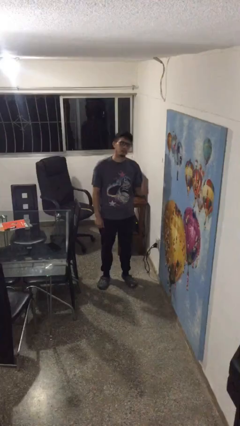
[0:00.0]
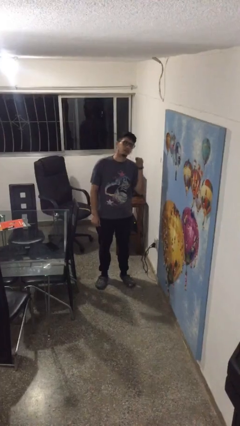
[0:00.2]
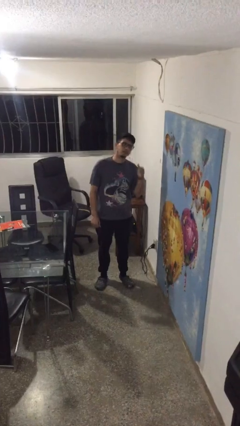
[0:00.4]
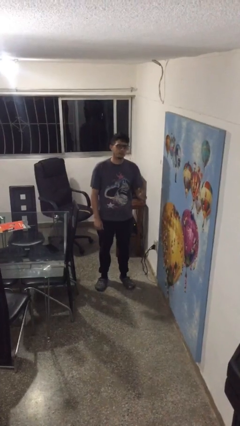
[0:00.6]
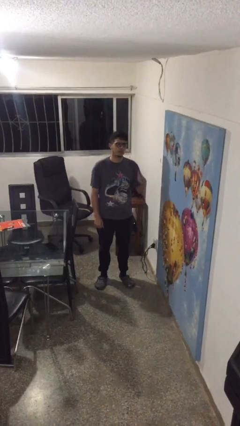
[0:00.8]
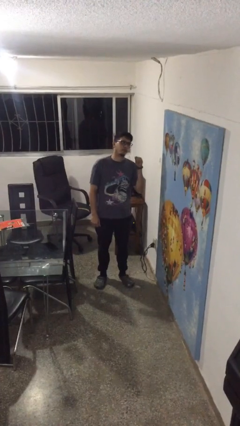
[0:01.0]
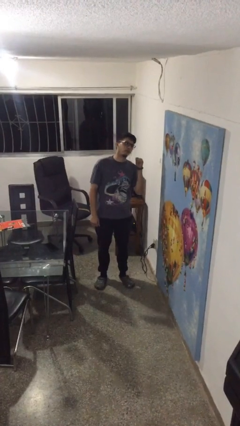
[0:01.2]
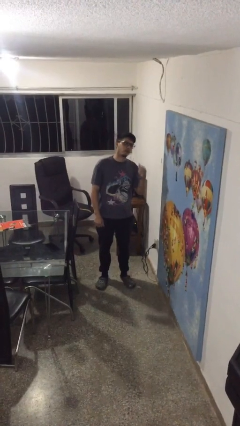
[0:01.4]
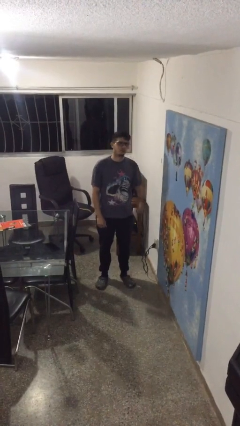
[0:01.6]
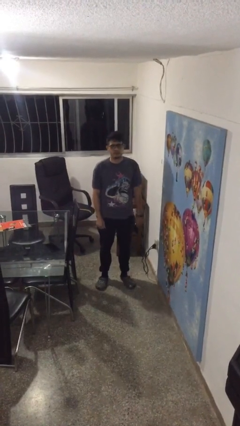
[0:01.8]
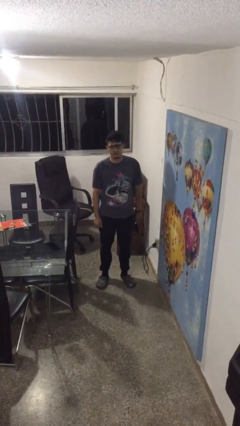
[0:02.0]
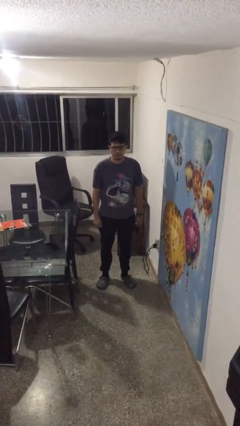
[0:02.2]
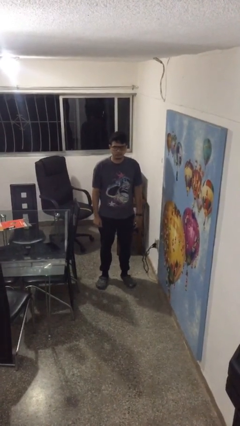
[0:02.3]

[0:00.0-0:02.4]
person gestures behind me

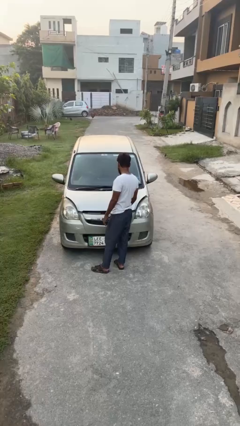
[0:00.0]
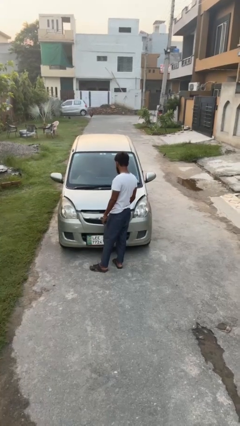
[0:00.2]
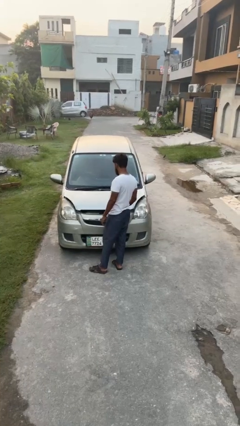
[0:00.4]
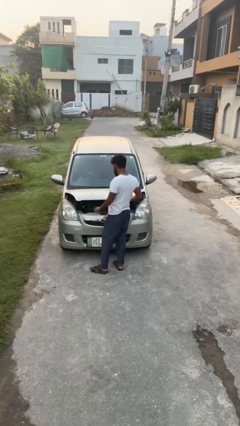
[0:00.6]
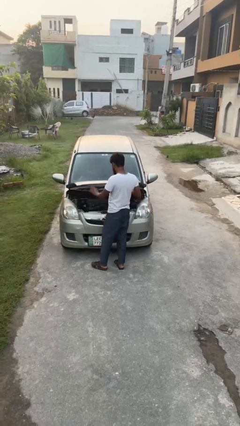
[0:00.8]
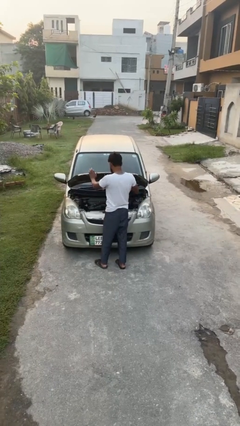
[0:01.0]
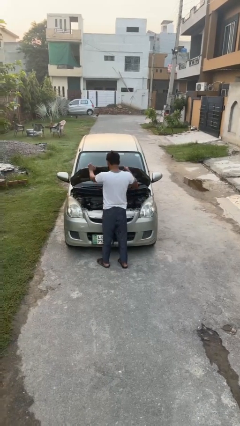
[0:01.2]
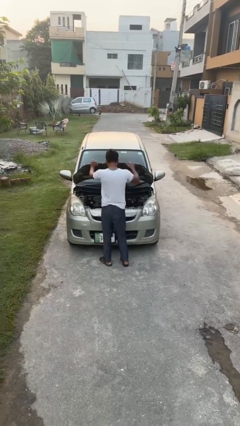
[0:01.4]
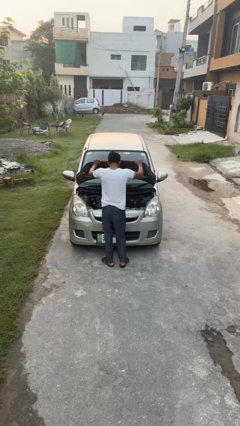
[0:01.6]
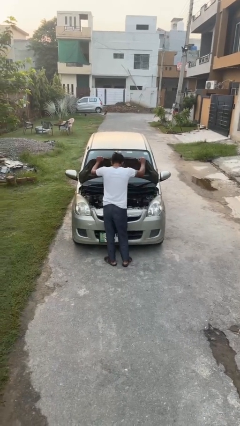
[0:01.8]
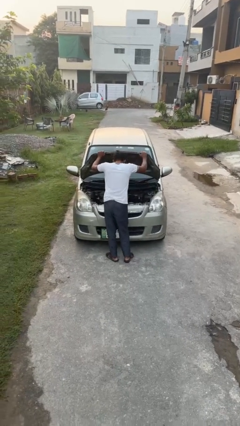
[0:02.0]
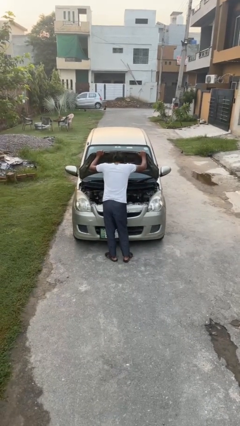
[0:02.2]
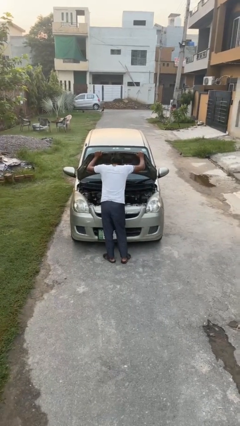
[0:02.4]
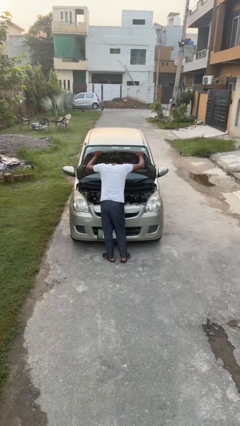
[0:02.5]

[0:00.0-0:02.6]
person opens car hood

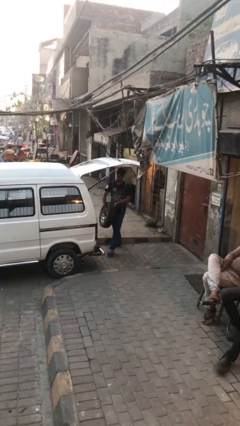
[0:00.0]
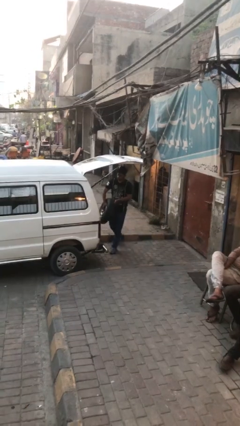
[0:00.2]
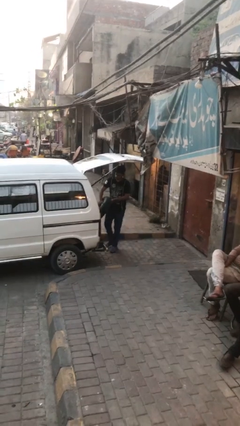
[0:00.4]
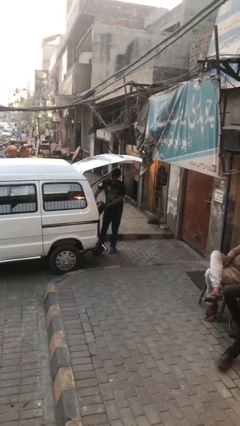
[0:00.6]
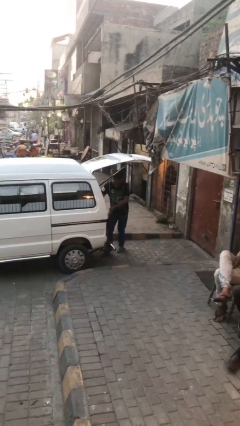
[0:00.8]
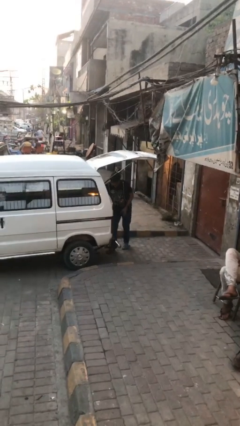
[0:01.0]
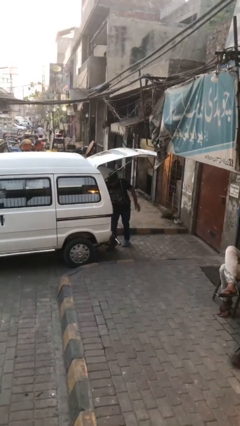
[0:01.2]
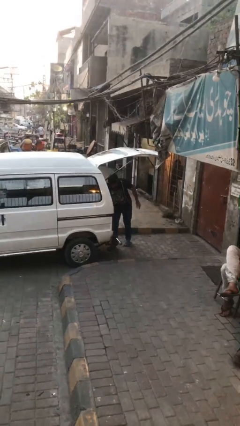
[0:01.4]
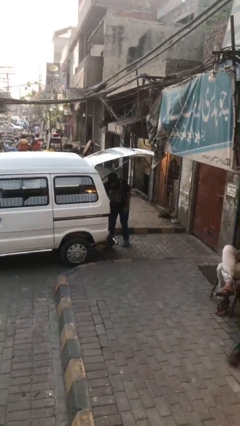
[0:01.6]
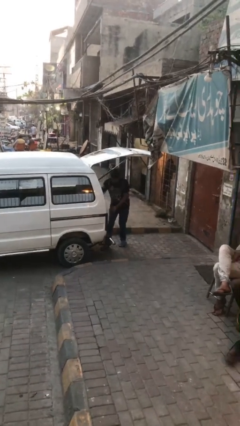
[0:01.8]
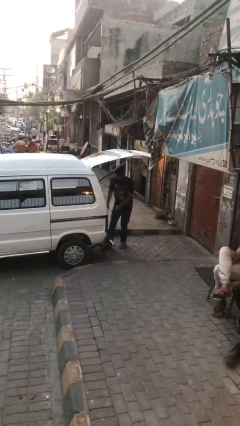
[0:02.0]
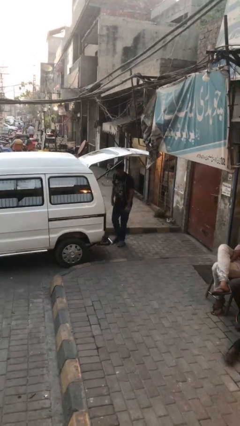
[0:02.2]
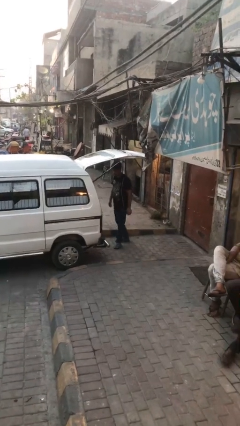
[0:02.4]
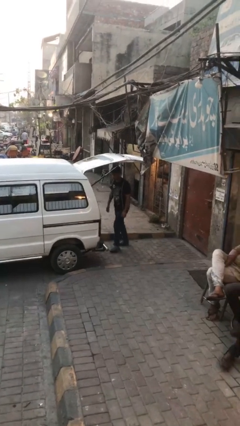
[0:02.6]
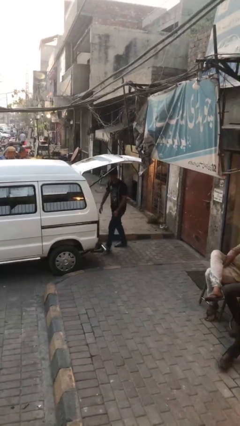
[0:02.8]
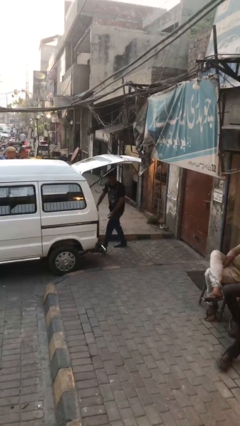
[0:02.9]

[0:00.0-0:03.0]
person loads car

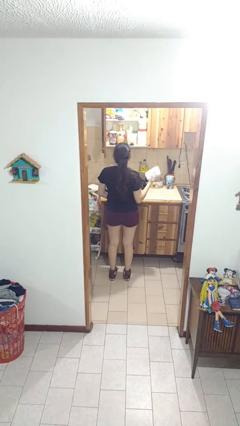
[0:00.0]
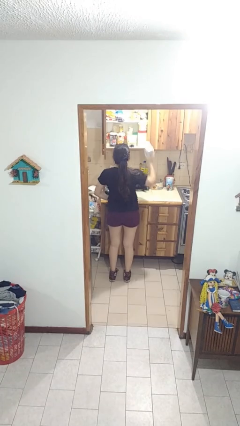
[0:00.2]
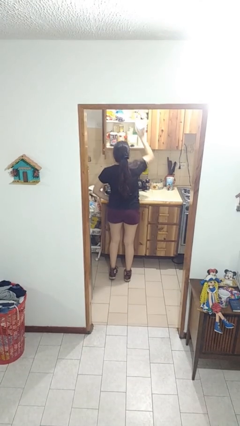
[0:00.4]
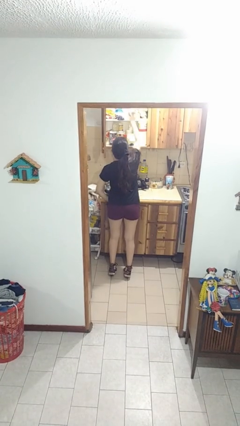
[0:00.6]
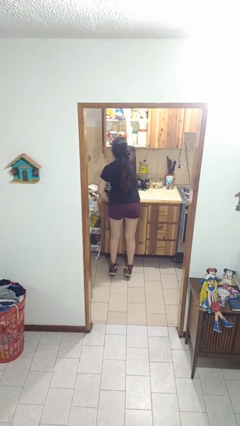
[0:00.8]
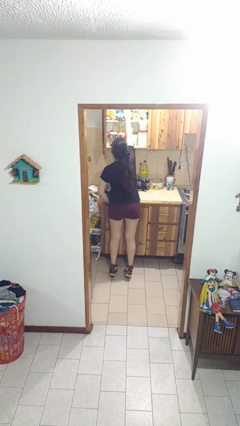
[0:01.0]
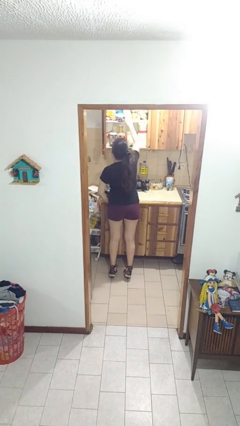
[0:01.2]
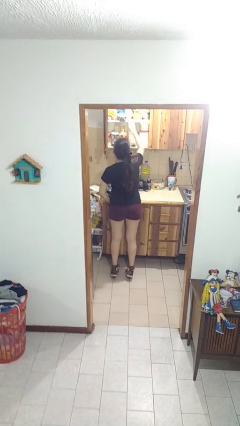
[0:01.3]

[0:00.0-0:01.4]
person puts object in cabinet

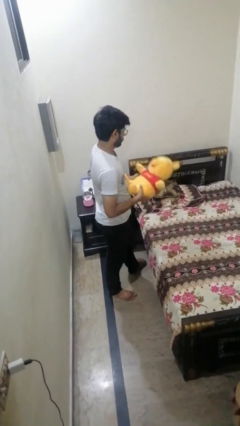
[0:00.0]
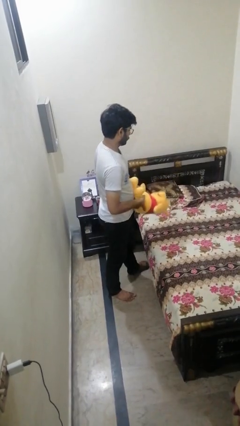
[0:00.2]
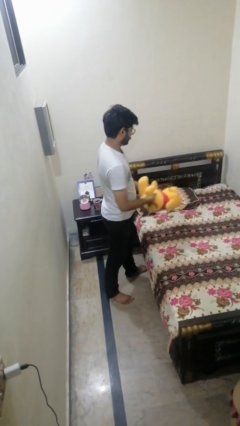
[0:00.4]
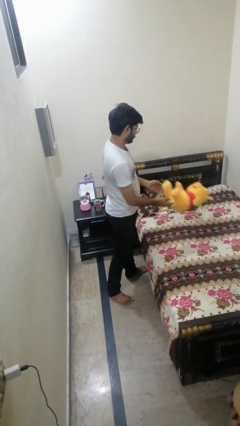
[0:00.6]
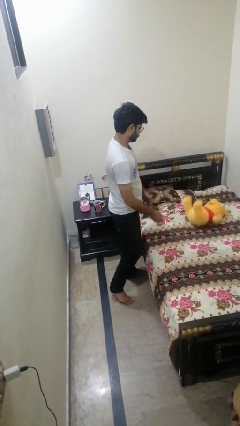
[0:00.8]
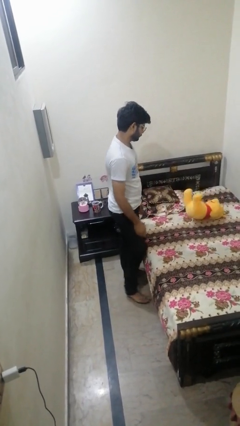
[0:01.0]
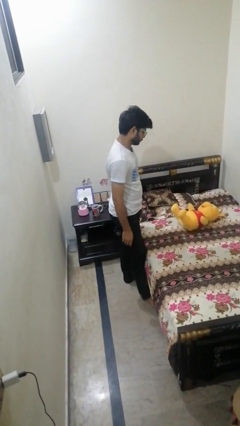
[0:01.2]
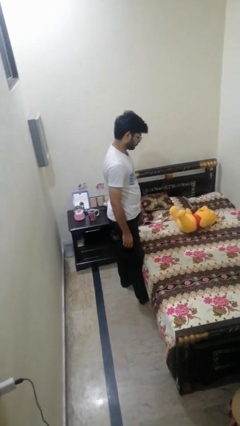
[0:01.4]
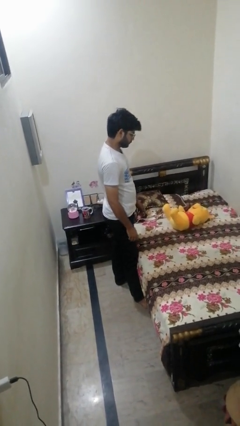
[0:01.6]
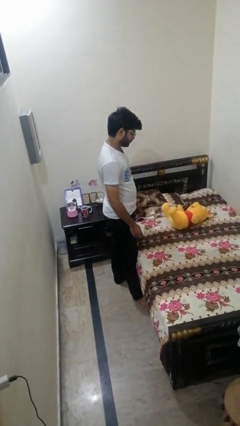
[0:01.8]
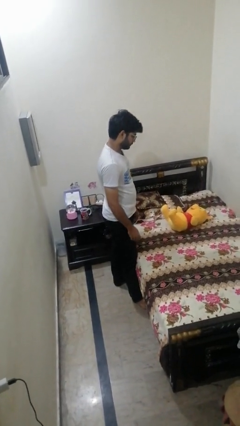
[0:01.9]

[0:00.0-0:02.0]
person puts down object on bed

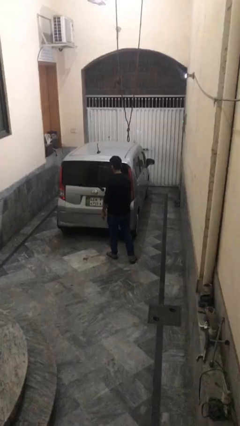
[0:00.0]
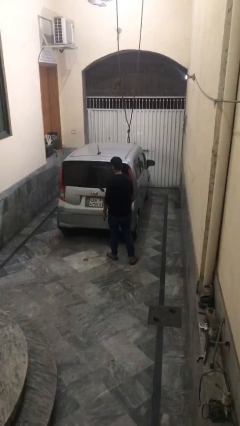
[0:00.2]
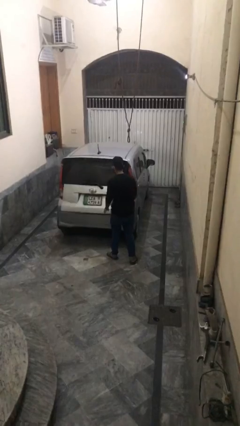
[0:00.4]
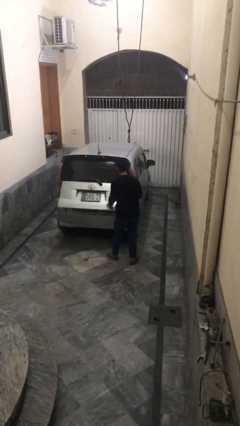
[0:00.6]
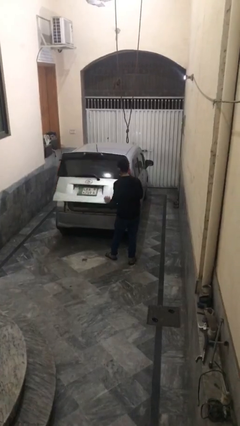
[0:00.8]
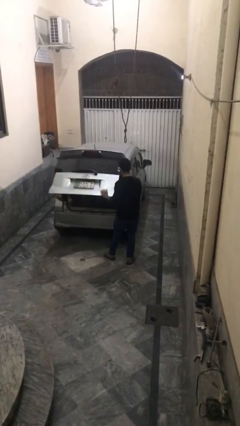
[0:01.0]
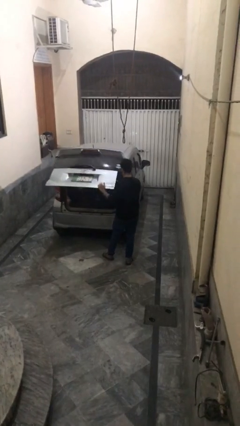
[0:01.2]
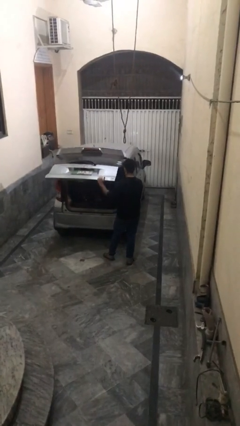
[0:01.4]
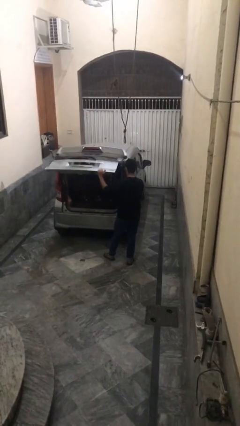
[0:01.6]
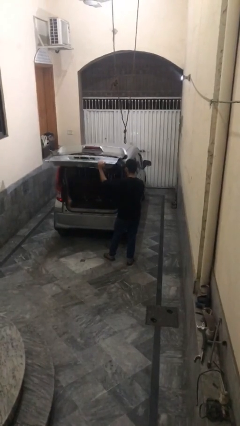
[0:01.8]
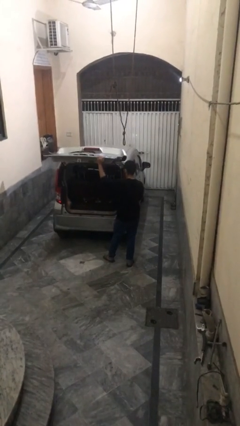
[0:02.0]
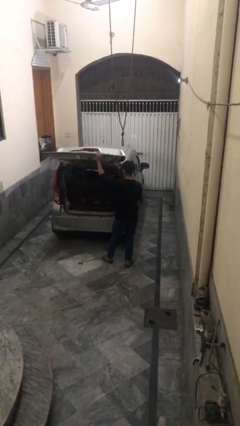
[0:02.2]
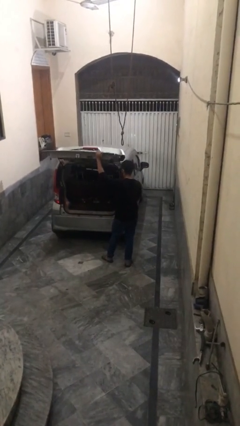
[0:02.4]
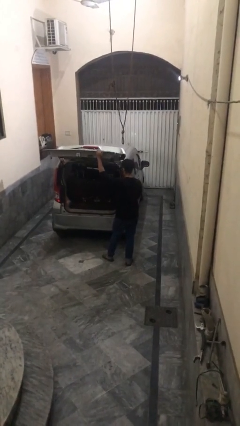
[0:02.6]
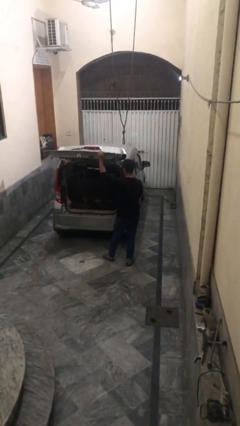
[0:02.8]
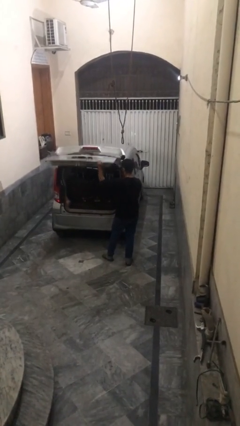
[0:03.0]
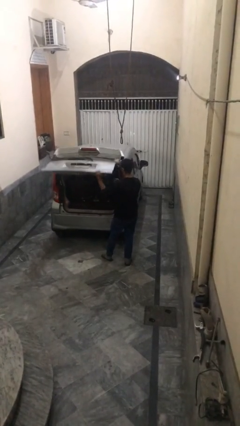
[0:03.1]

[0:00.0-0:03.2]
person opens car trunk

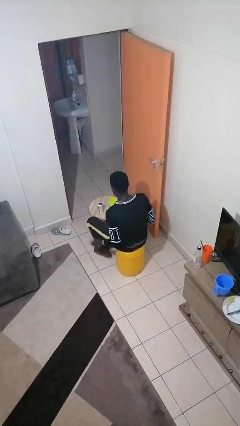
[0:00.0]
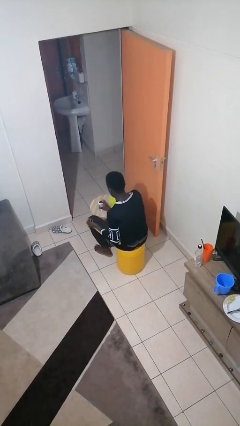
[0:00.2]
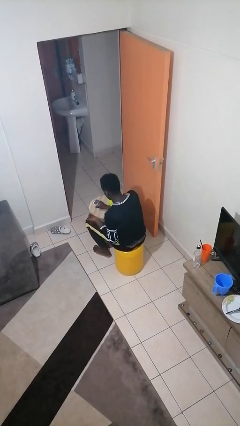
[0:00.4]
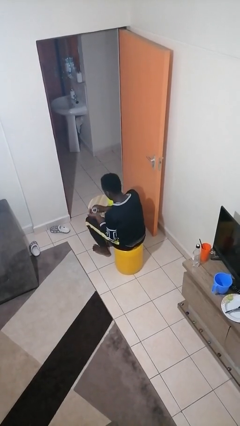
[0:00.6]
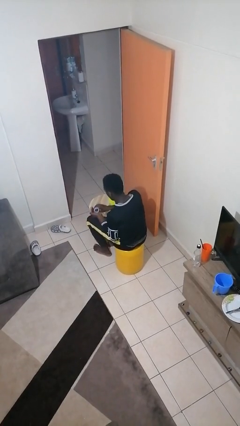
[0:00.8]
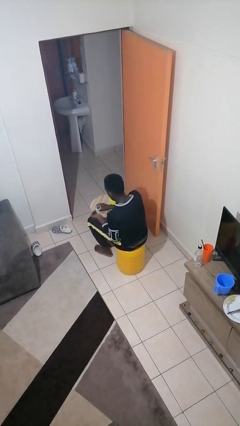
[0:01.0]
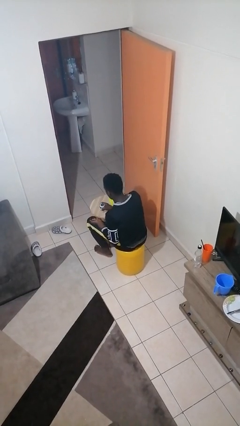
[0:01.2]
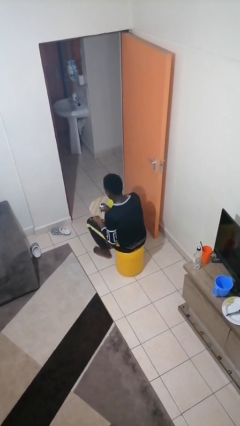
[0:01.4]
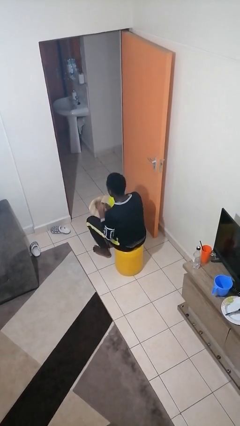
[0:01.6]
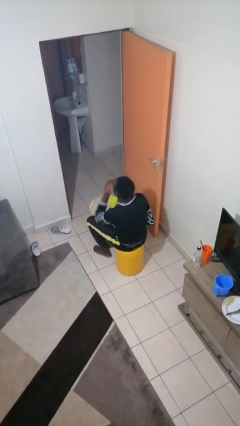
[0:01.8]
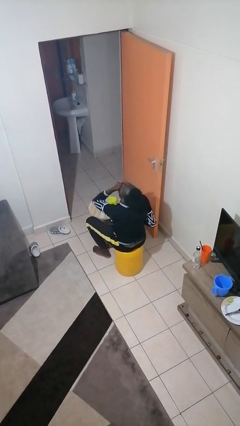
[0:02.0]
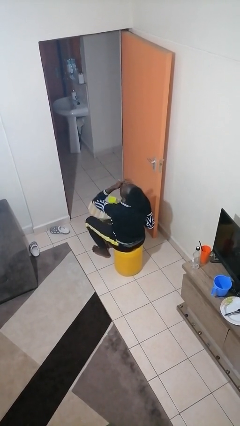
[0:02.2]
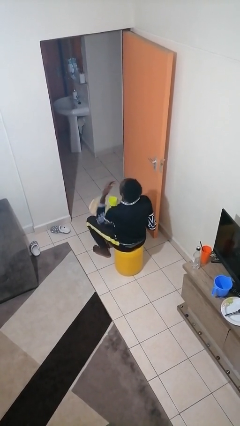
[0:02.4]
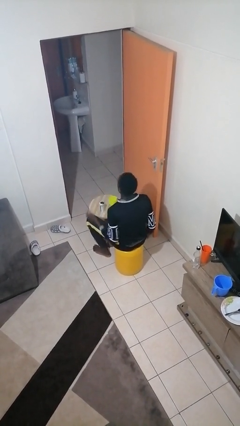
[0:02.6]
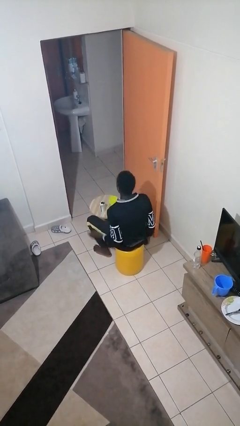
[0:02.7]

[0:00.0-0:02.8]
person takes medicine pills
